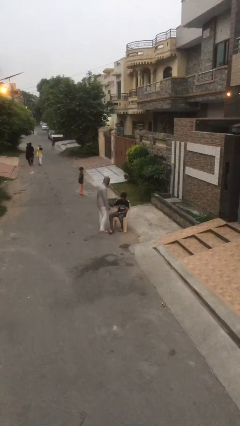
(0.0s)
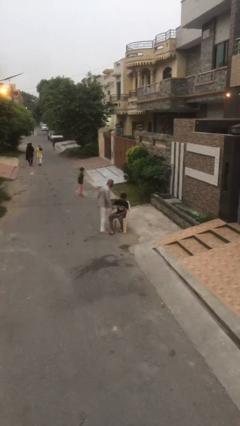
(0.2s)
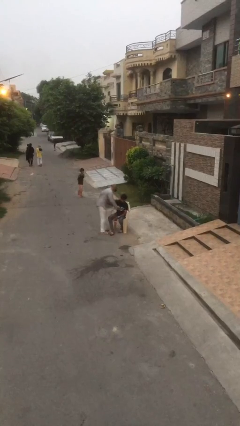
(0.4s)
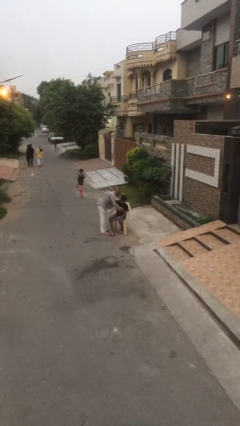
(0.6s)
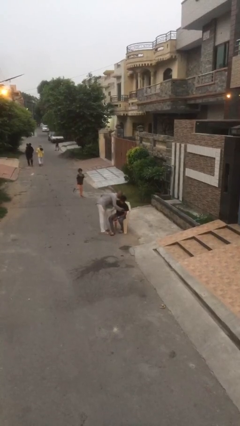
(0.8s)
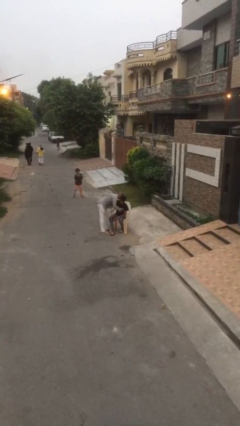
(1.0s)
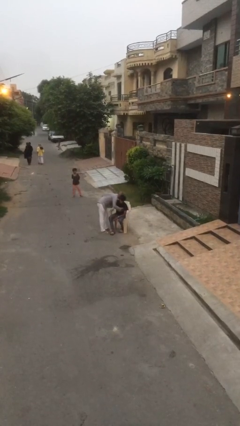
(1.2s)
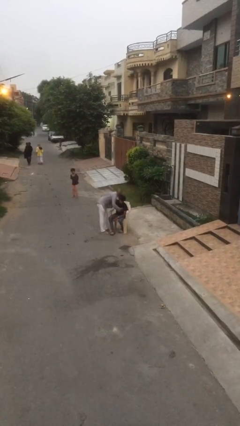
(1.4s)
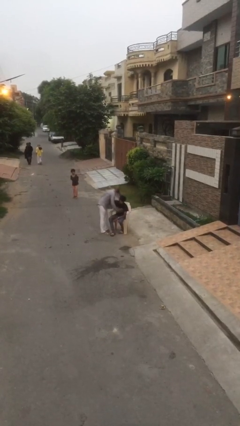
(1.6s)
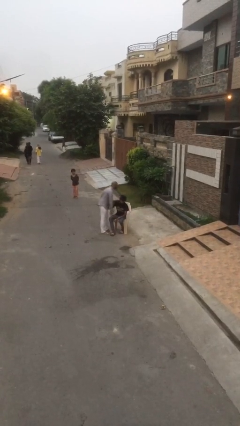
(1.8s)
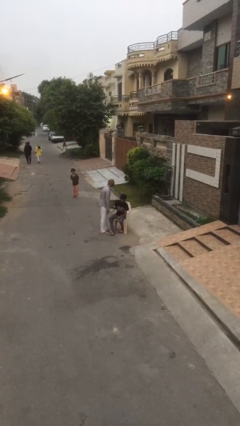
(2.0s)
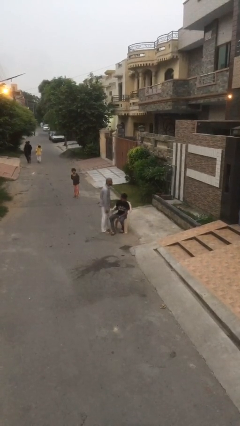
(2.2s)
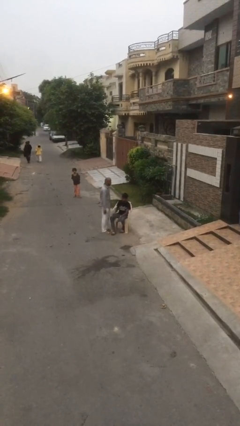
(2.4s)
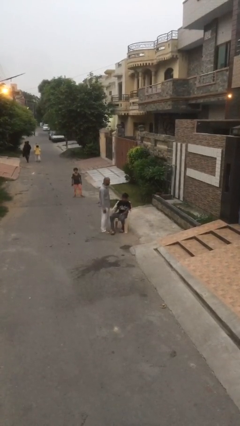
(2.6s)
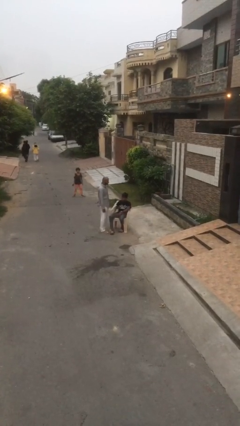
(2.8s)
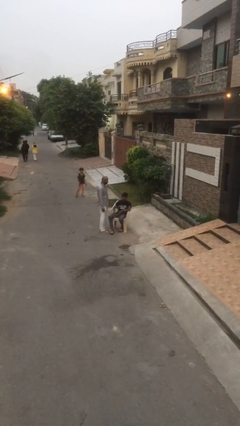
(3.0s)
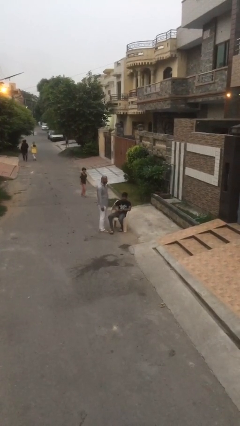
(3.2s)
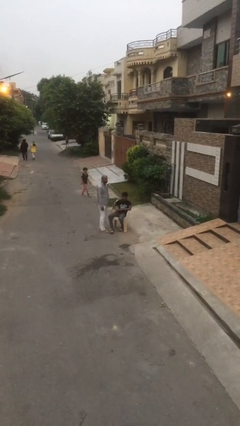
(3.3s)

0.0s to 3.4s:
person embraces person

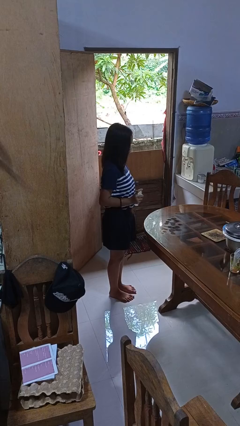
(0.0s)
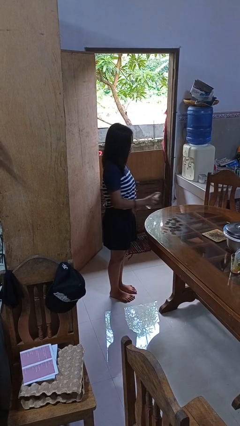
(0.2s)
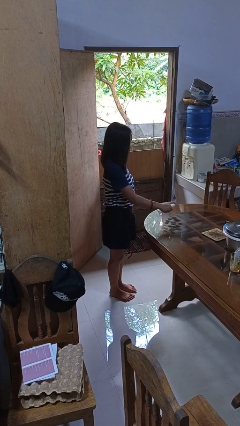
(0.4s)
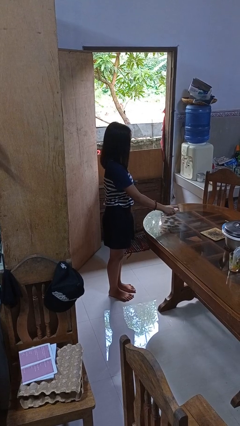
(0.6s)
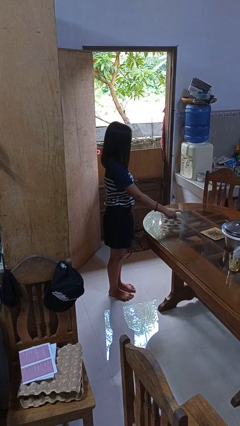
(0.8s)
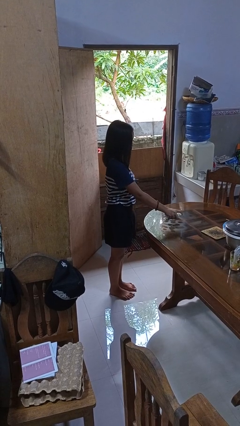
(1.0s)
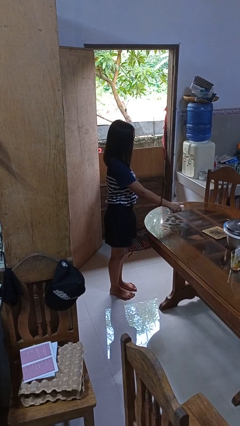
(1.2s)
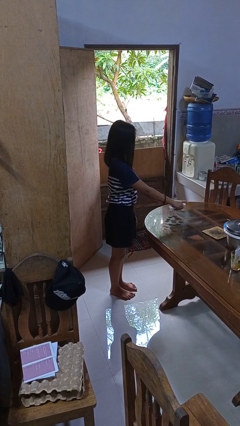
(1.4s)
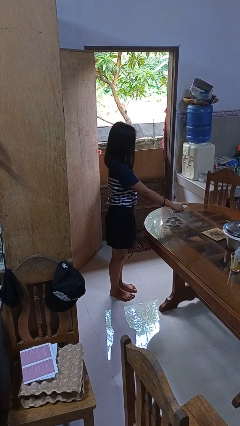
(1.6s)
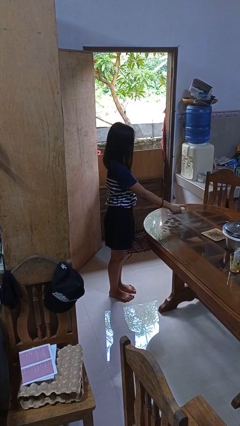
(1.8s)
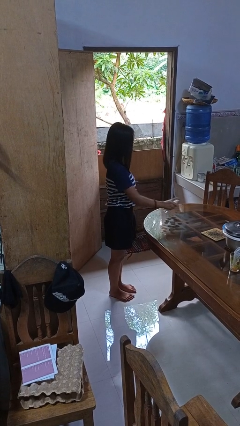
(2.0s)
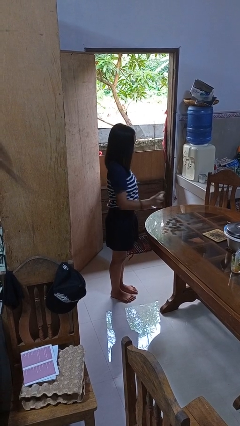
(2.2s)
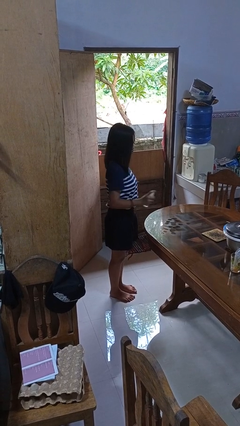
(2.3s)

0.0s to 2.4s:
person sprays from bottle

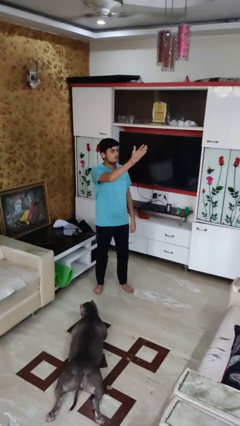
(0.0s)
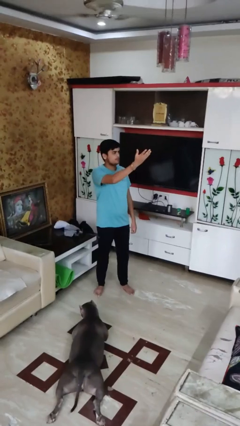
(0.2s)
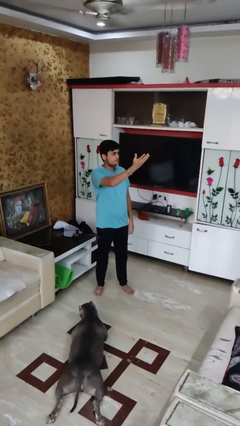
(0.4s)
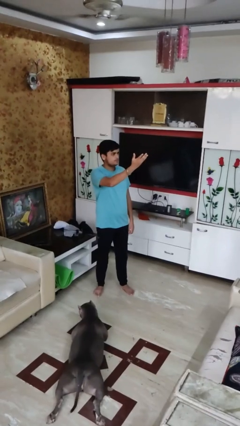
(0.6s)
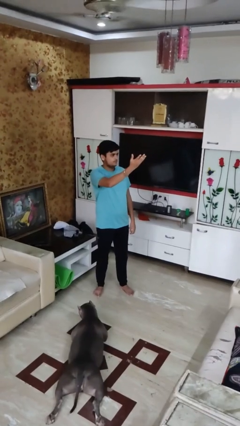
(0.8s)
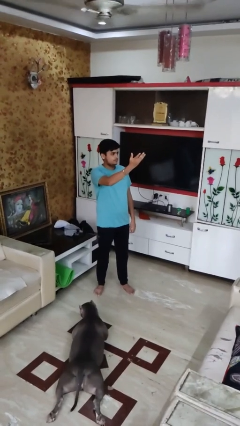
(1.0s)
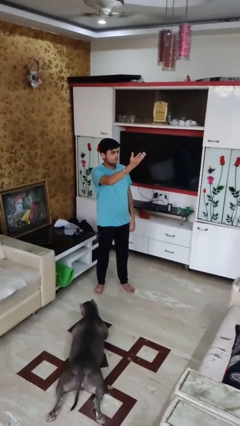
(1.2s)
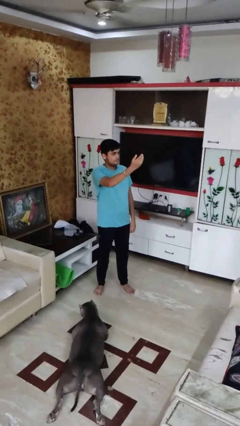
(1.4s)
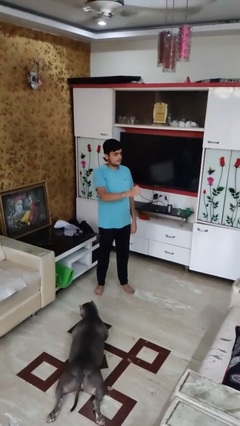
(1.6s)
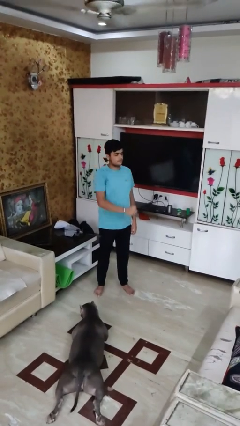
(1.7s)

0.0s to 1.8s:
person gestures blow kiss

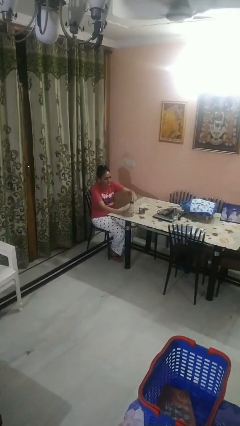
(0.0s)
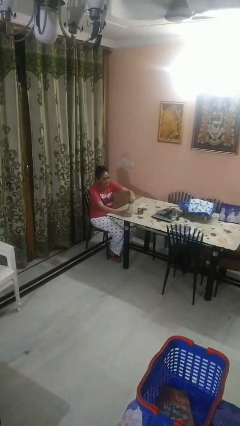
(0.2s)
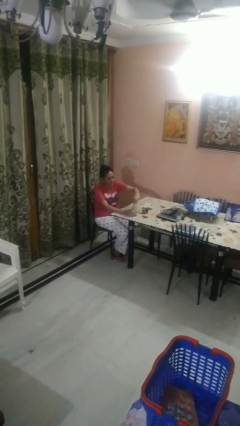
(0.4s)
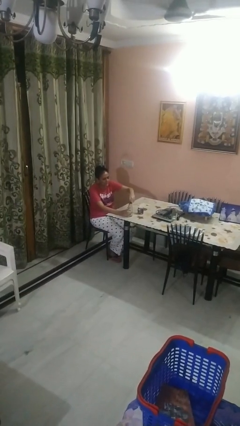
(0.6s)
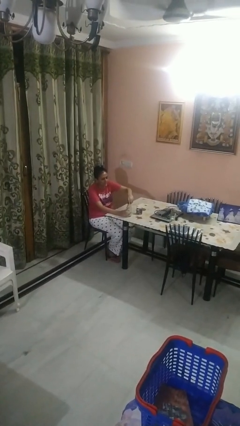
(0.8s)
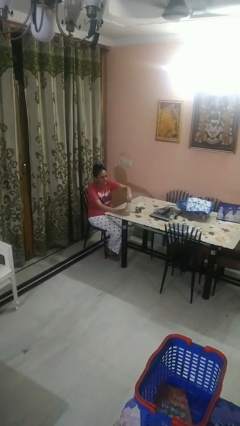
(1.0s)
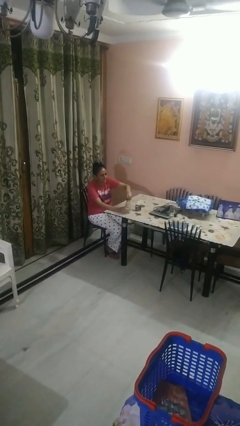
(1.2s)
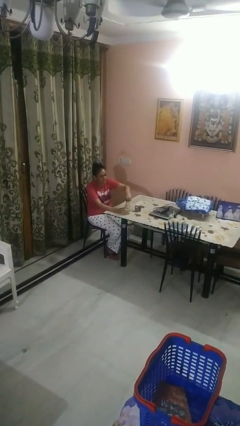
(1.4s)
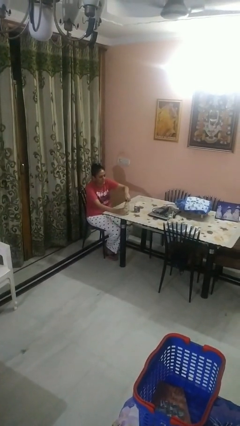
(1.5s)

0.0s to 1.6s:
person unscrews lid from bottle

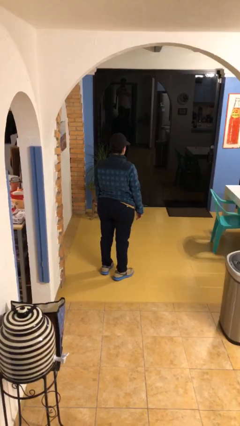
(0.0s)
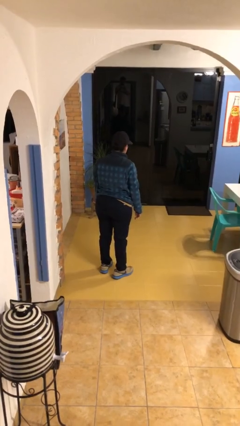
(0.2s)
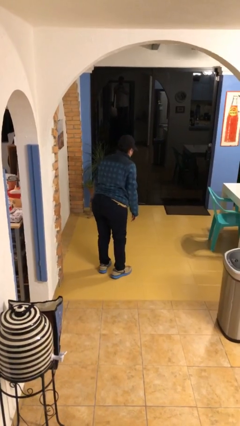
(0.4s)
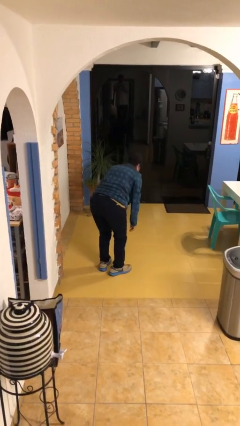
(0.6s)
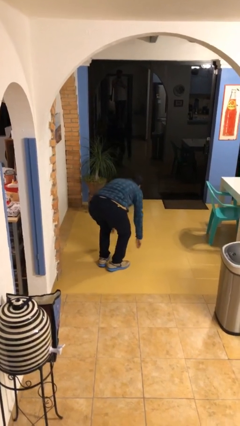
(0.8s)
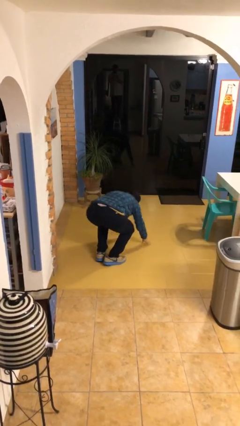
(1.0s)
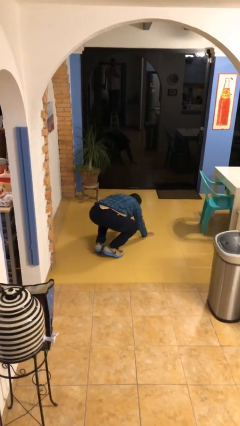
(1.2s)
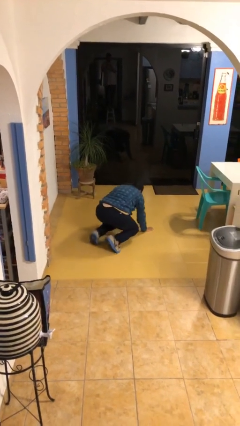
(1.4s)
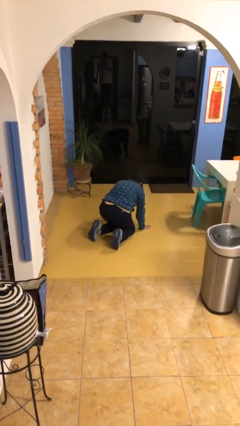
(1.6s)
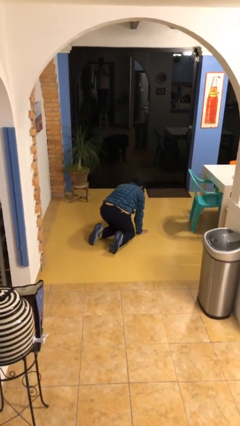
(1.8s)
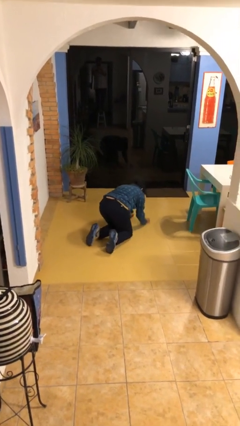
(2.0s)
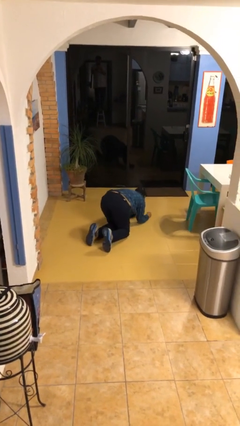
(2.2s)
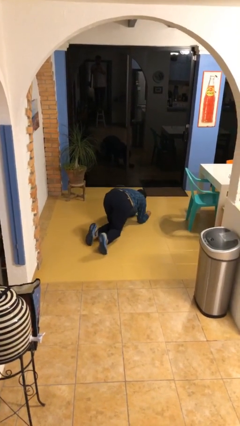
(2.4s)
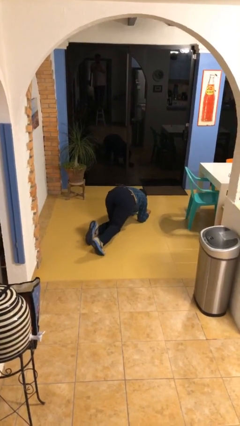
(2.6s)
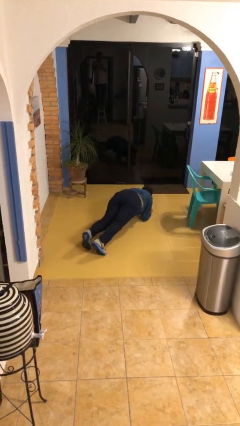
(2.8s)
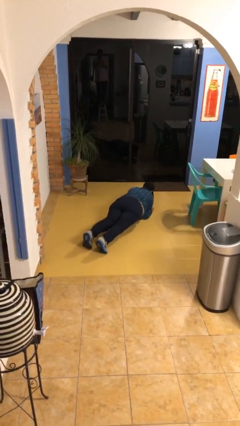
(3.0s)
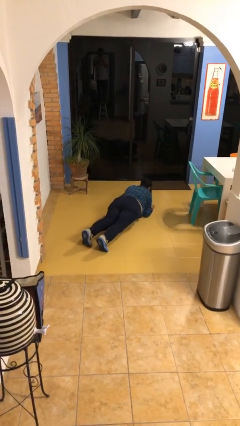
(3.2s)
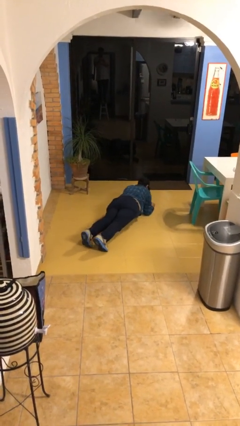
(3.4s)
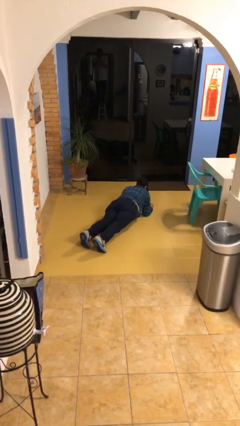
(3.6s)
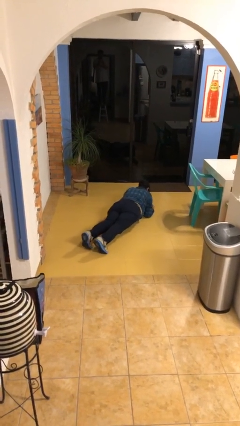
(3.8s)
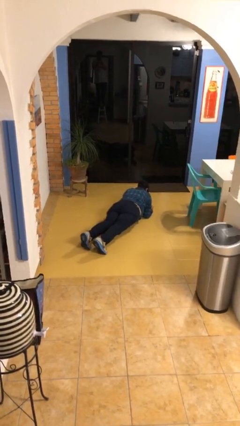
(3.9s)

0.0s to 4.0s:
person exercises with plank

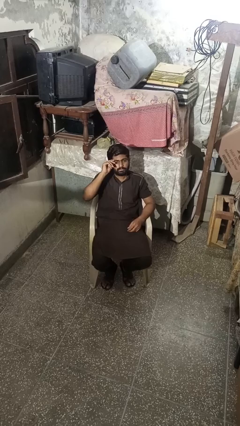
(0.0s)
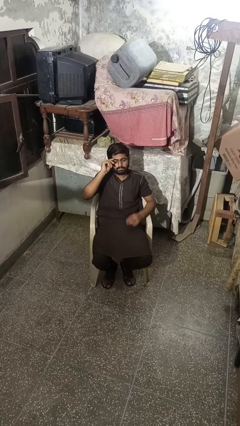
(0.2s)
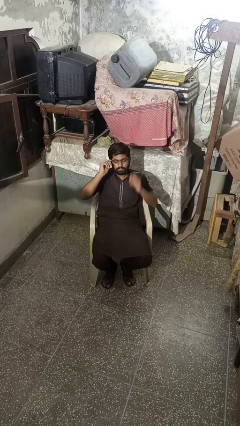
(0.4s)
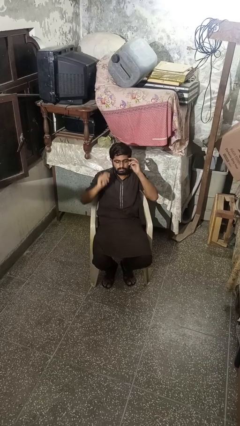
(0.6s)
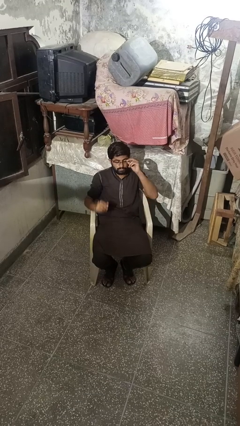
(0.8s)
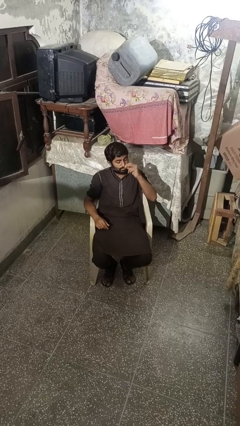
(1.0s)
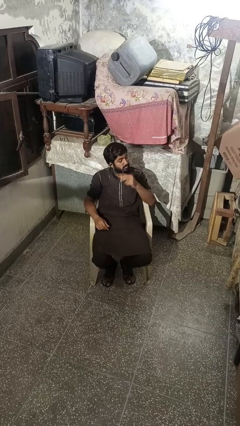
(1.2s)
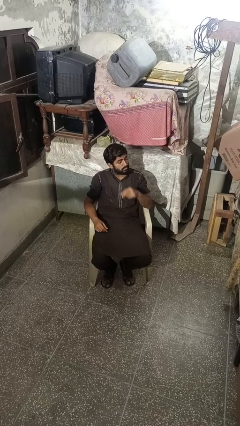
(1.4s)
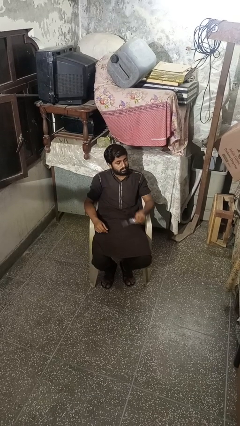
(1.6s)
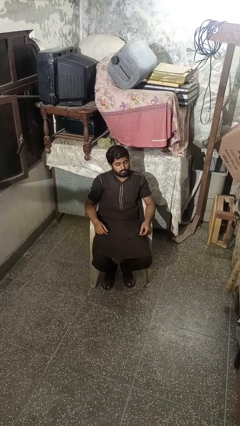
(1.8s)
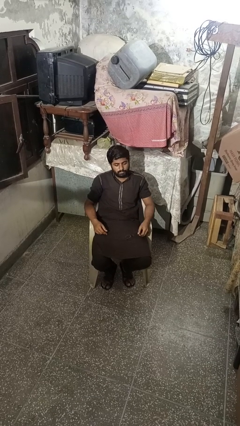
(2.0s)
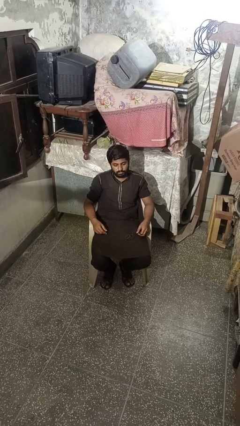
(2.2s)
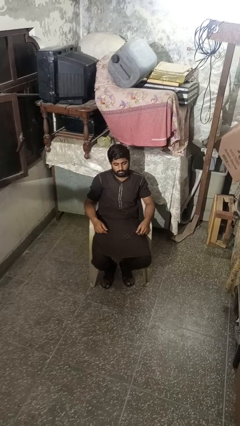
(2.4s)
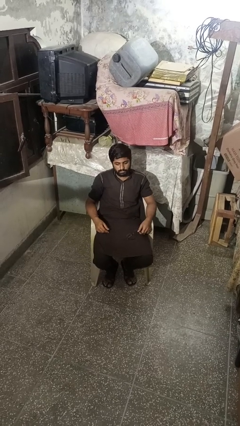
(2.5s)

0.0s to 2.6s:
person takes off glasses

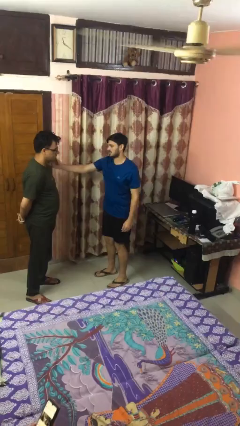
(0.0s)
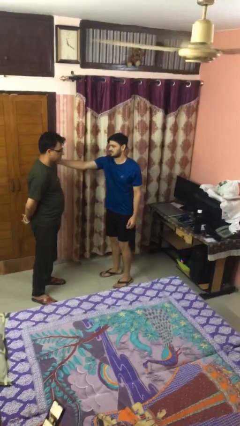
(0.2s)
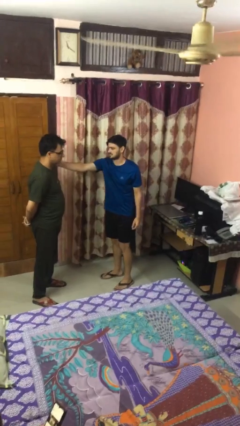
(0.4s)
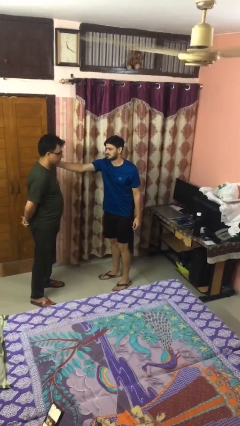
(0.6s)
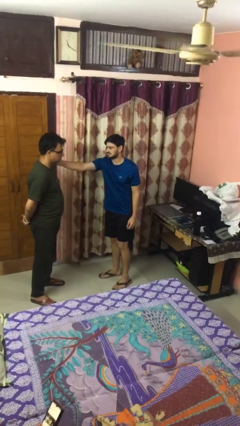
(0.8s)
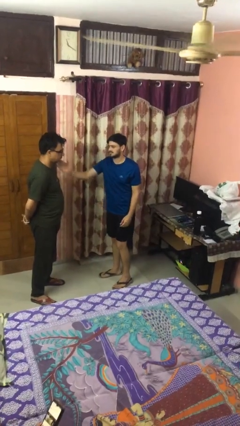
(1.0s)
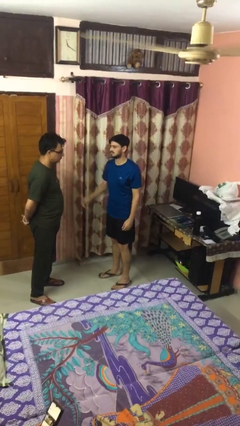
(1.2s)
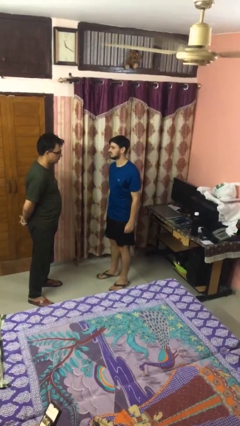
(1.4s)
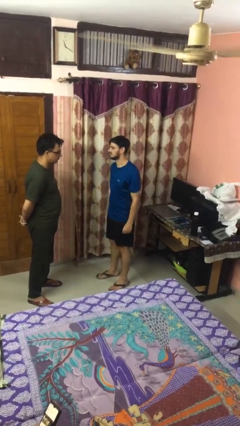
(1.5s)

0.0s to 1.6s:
person touches face of person
